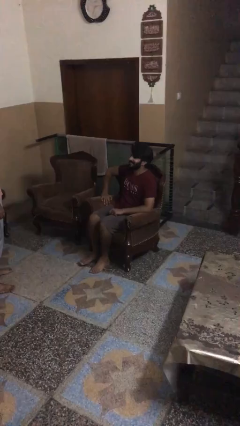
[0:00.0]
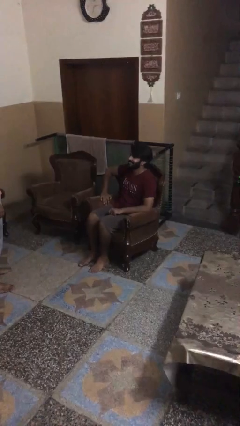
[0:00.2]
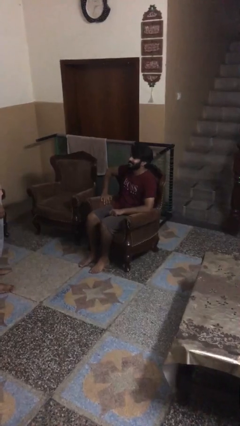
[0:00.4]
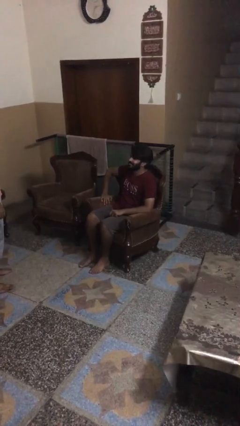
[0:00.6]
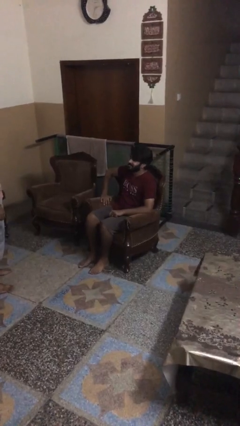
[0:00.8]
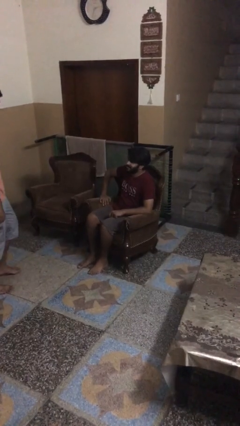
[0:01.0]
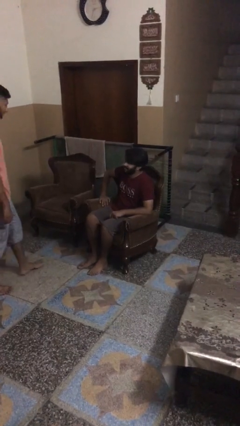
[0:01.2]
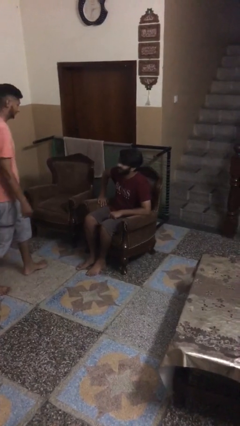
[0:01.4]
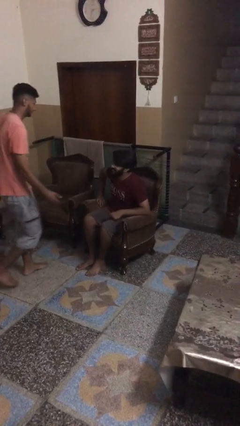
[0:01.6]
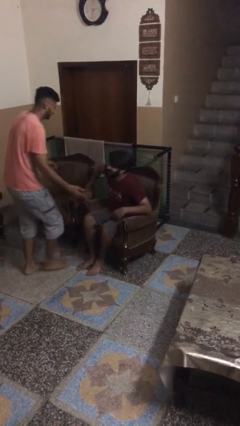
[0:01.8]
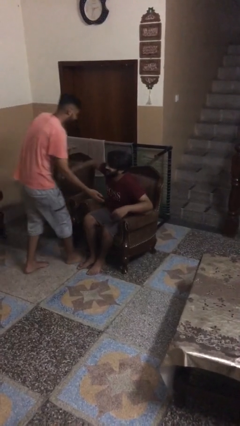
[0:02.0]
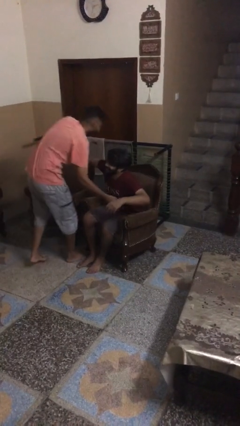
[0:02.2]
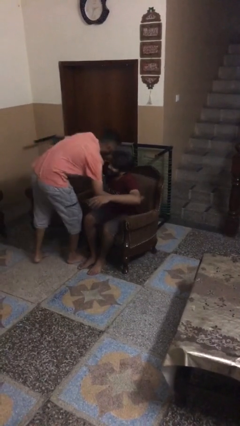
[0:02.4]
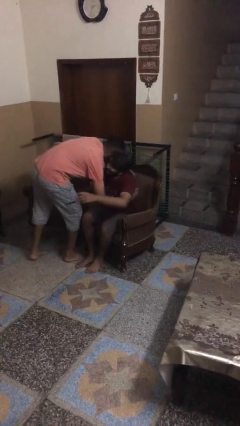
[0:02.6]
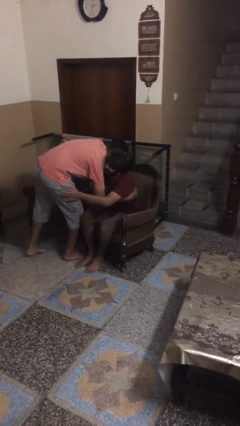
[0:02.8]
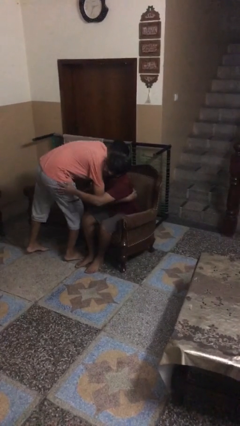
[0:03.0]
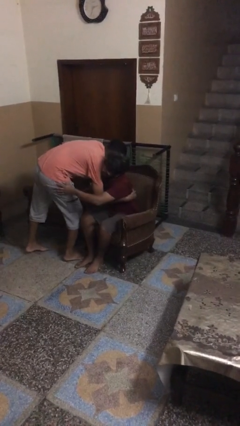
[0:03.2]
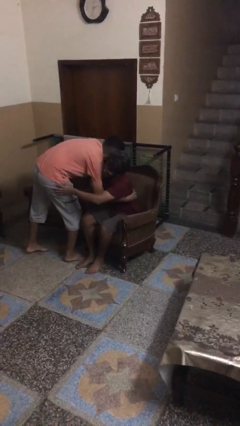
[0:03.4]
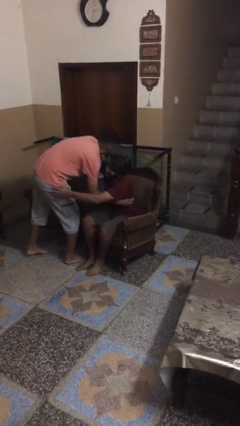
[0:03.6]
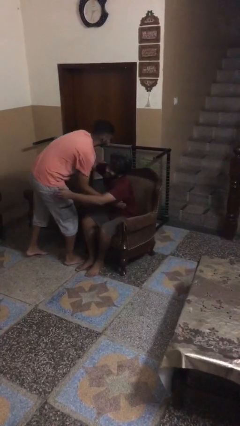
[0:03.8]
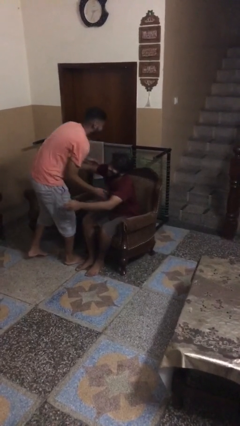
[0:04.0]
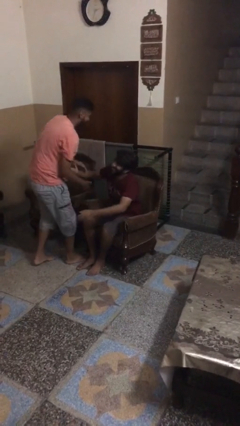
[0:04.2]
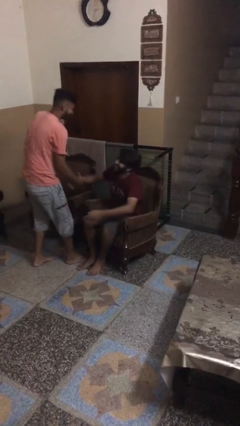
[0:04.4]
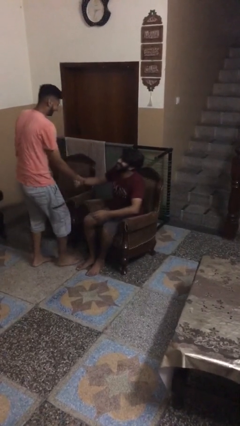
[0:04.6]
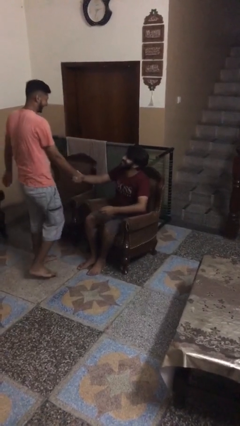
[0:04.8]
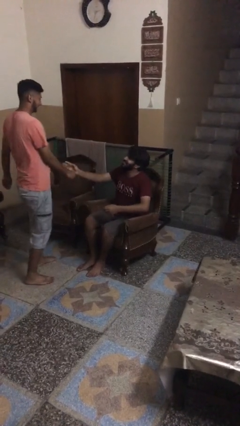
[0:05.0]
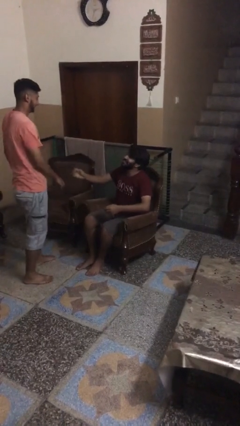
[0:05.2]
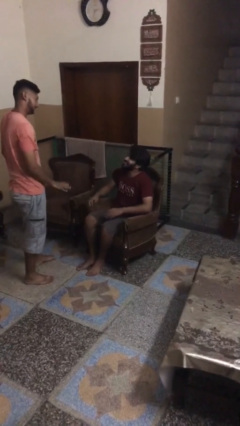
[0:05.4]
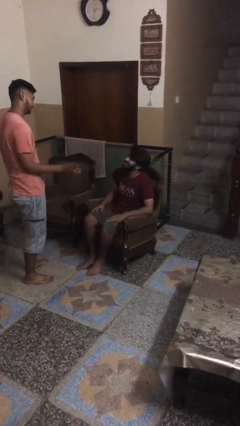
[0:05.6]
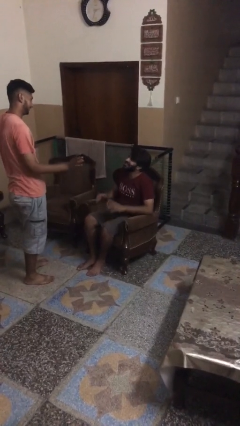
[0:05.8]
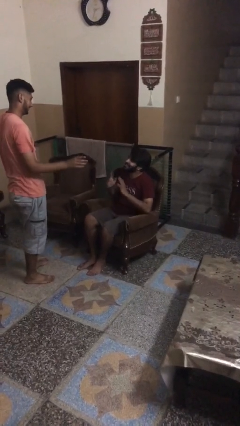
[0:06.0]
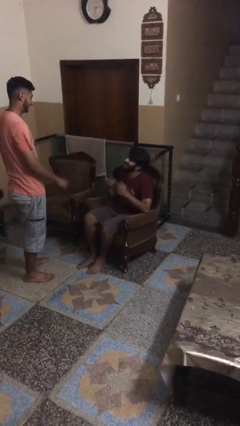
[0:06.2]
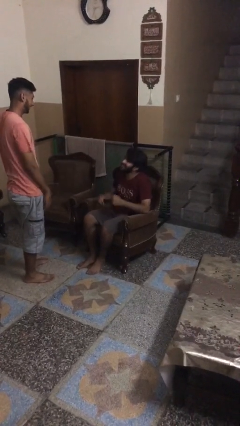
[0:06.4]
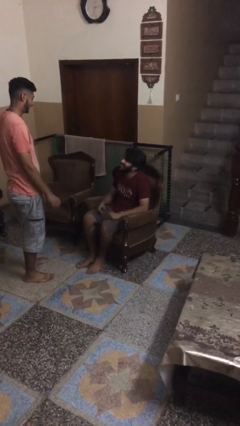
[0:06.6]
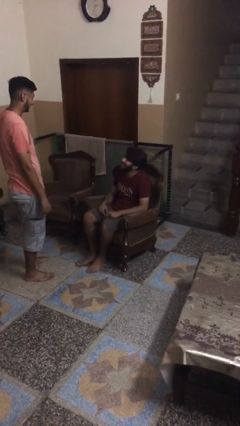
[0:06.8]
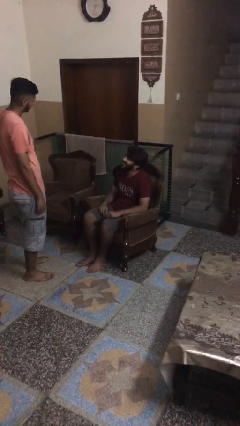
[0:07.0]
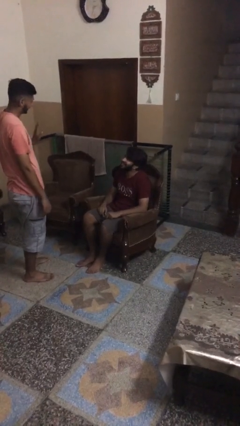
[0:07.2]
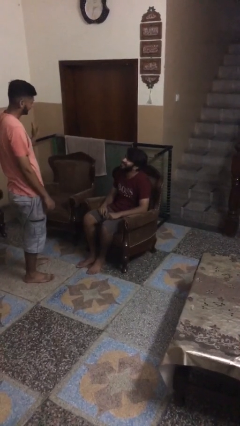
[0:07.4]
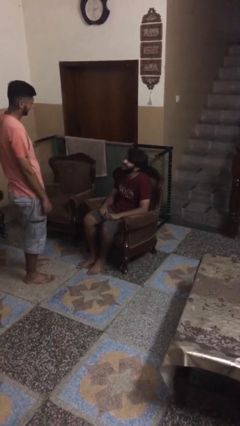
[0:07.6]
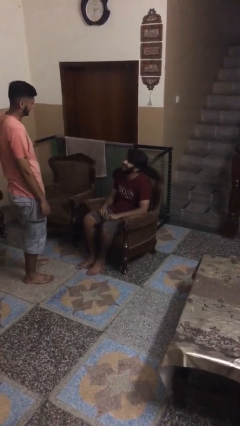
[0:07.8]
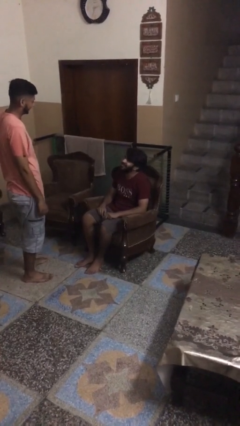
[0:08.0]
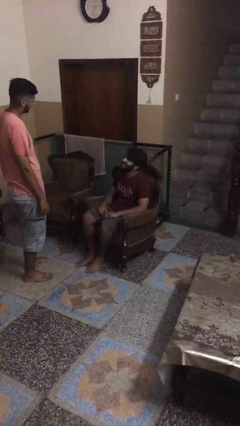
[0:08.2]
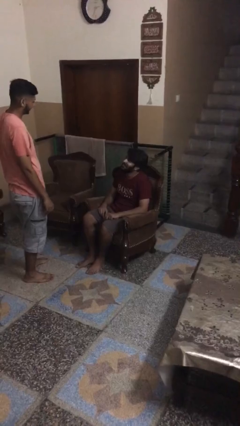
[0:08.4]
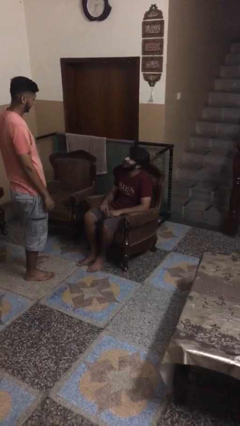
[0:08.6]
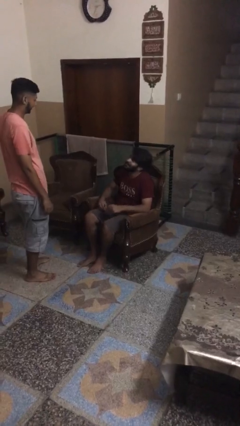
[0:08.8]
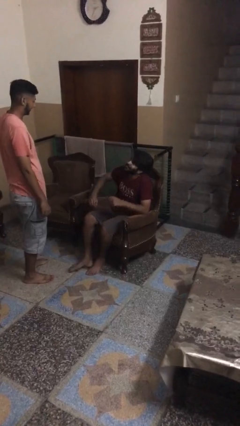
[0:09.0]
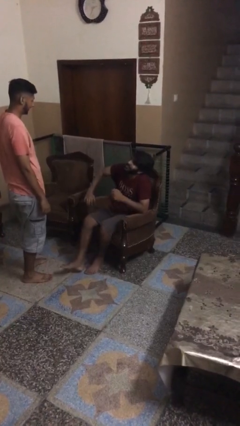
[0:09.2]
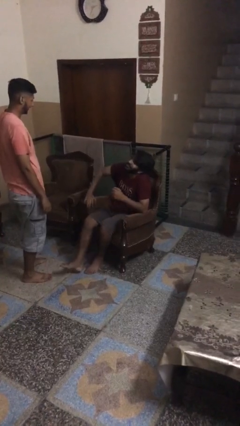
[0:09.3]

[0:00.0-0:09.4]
person embraces person

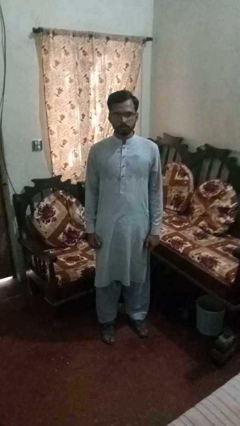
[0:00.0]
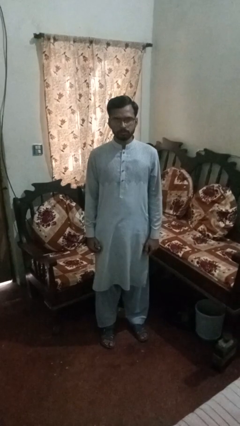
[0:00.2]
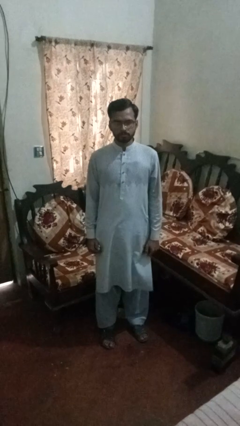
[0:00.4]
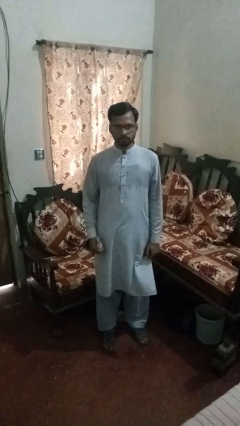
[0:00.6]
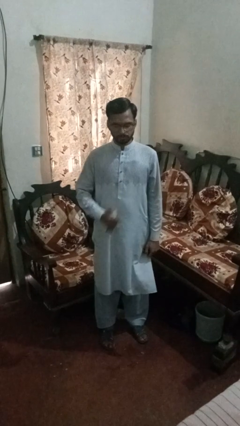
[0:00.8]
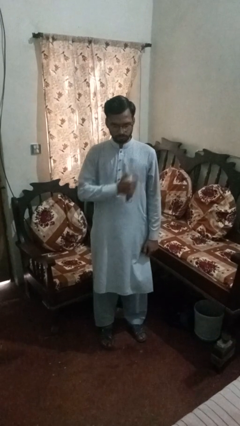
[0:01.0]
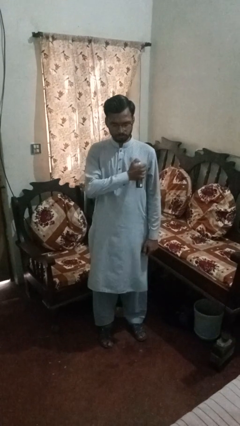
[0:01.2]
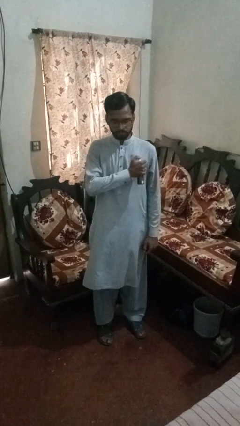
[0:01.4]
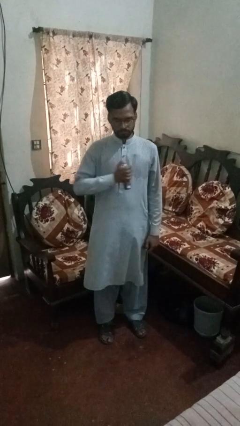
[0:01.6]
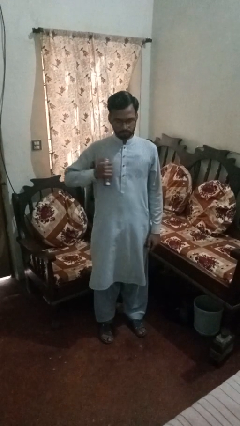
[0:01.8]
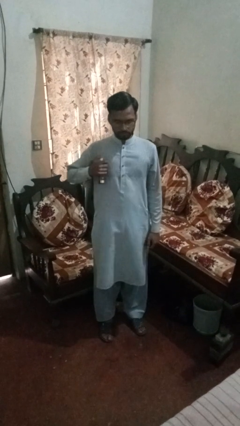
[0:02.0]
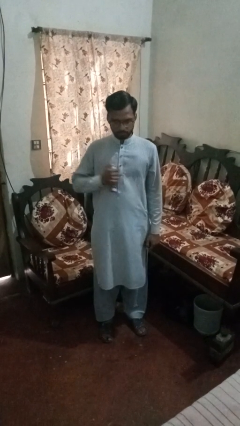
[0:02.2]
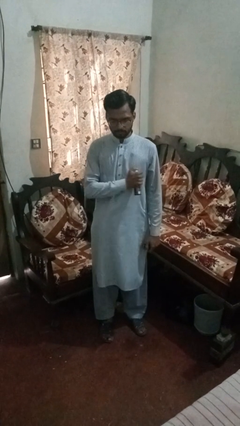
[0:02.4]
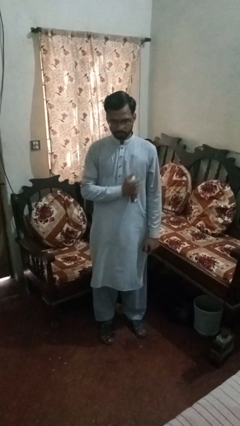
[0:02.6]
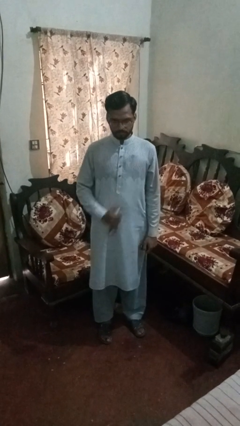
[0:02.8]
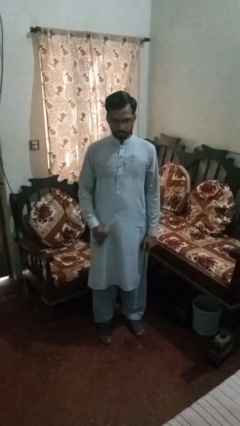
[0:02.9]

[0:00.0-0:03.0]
person applies deodorant

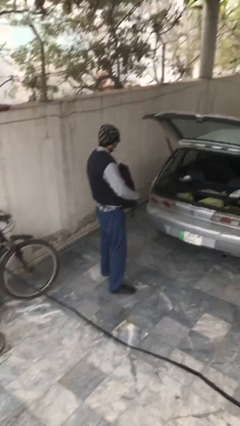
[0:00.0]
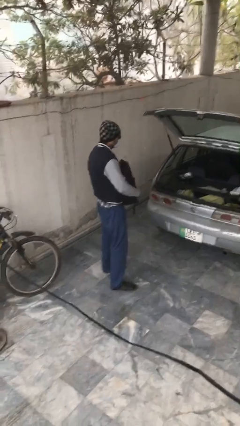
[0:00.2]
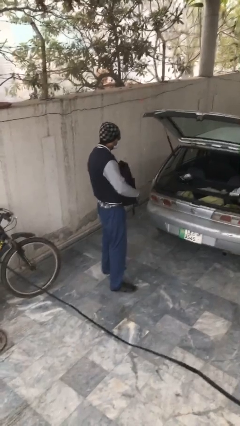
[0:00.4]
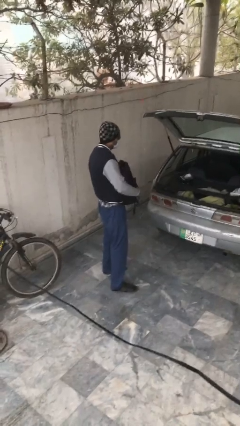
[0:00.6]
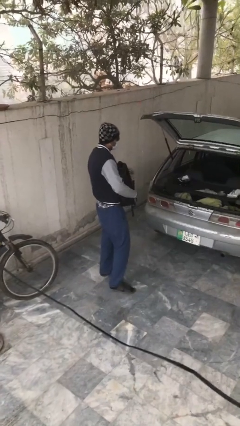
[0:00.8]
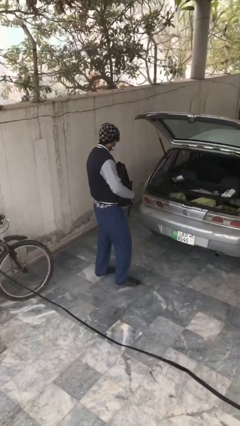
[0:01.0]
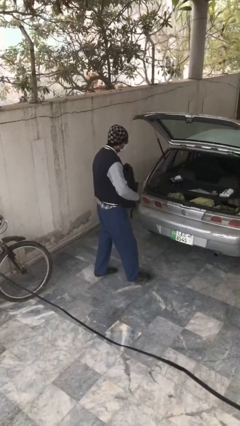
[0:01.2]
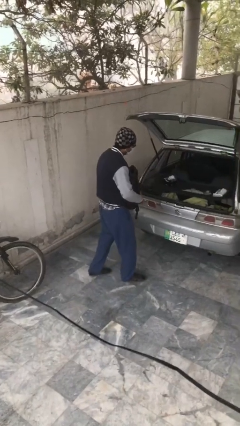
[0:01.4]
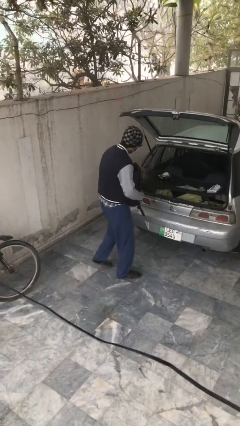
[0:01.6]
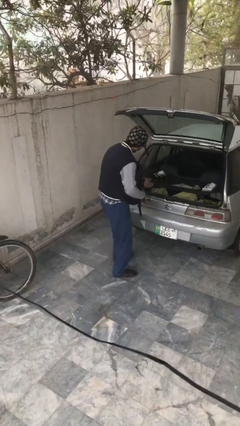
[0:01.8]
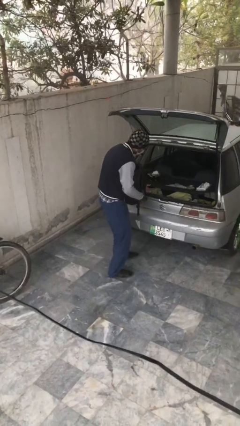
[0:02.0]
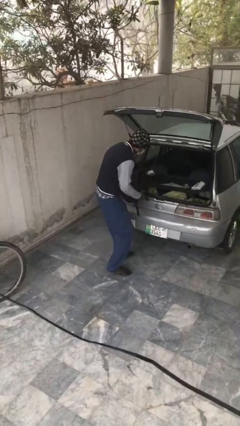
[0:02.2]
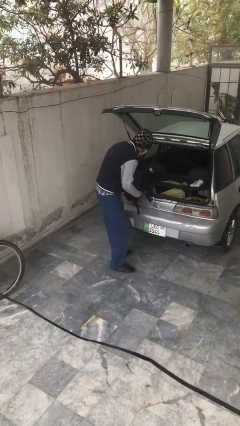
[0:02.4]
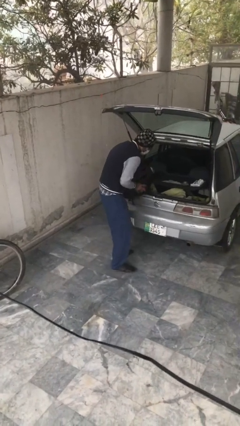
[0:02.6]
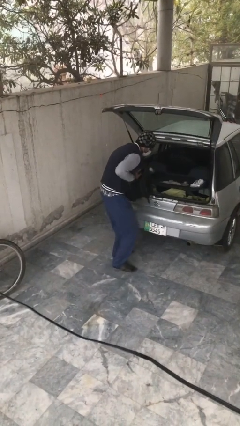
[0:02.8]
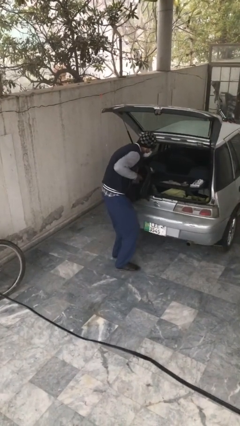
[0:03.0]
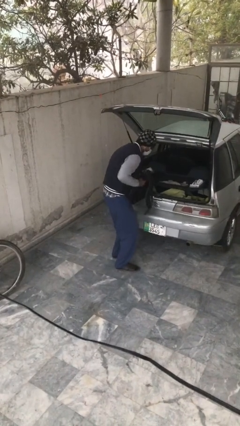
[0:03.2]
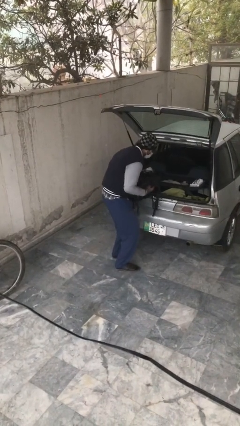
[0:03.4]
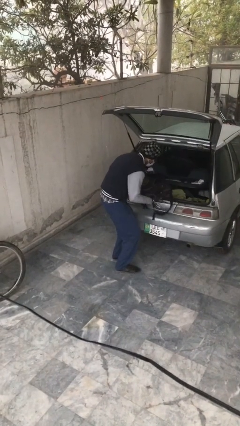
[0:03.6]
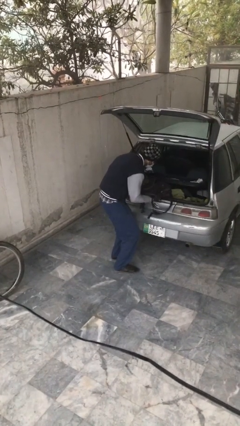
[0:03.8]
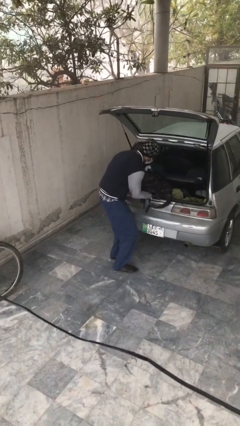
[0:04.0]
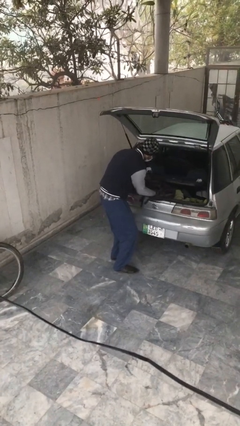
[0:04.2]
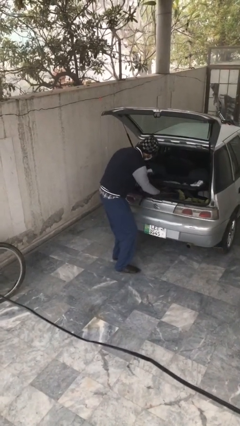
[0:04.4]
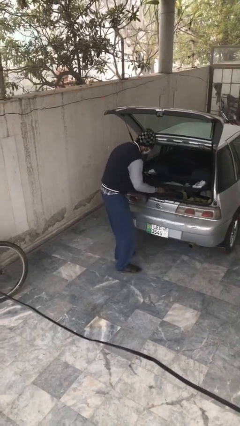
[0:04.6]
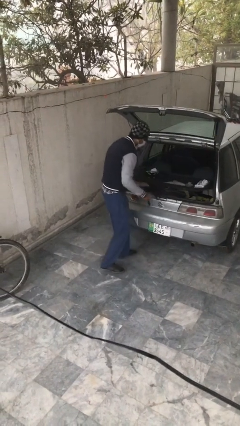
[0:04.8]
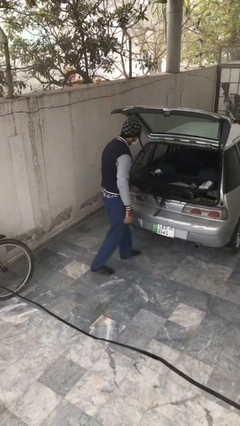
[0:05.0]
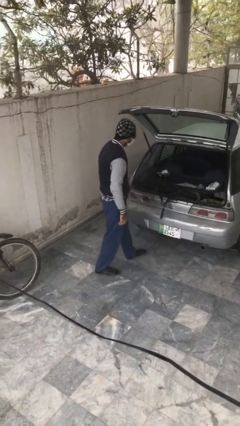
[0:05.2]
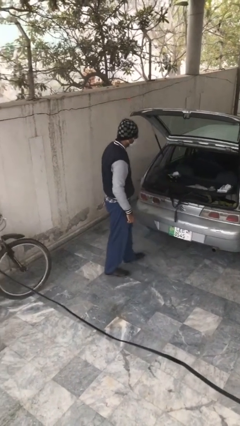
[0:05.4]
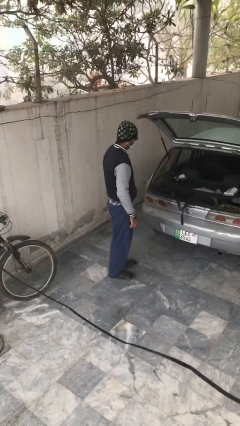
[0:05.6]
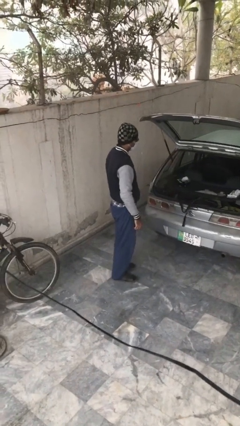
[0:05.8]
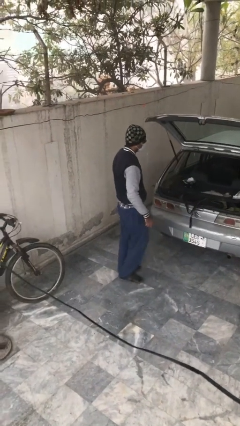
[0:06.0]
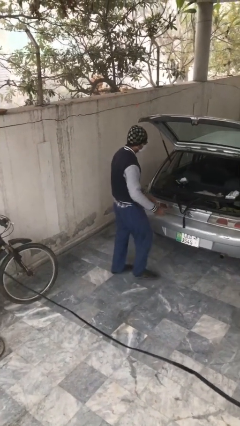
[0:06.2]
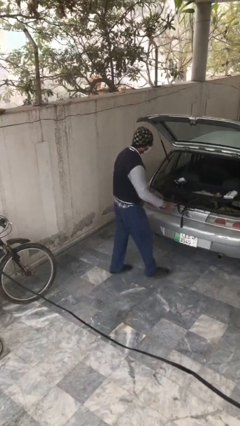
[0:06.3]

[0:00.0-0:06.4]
person loads car
